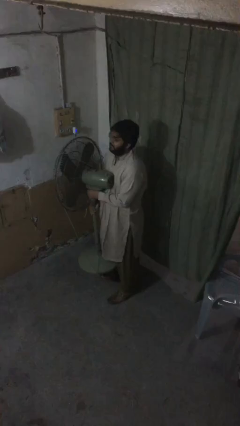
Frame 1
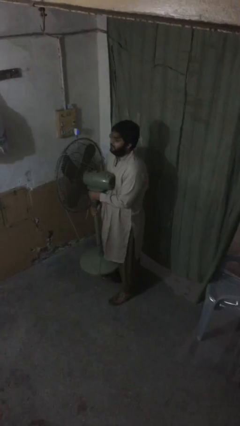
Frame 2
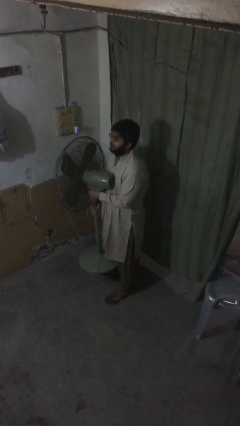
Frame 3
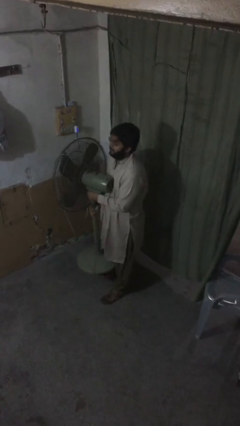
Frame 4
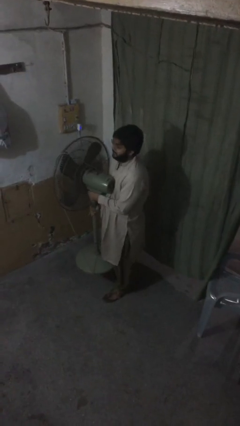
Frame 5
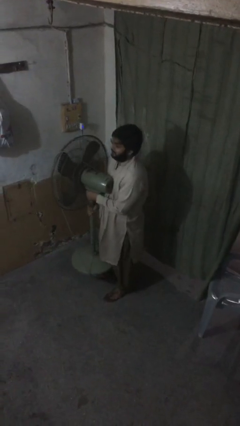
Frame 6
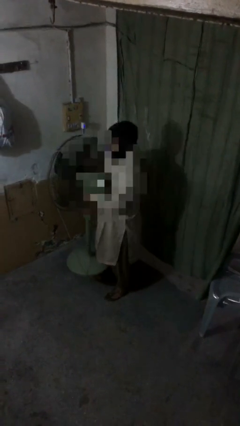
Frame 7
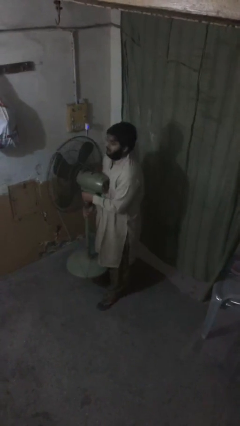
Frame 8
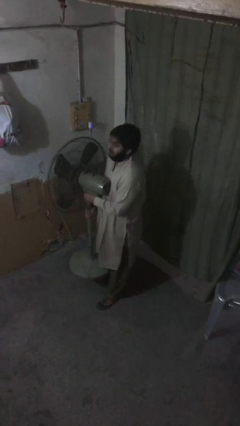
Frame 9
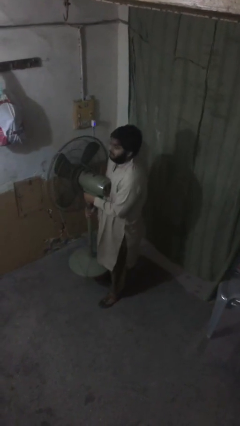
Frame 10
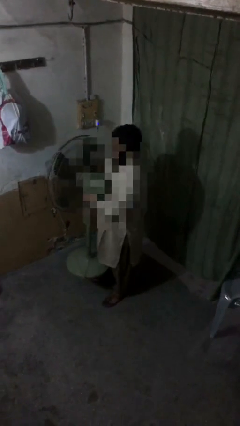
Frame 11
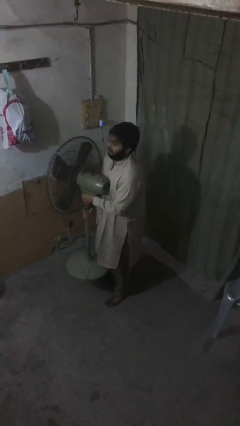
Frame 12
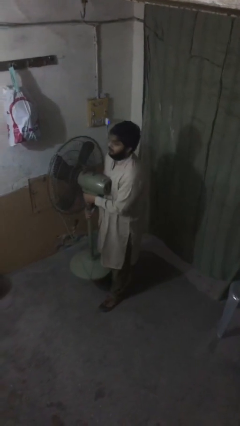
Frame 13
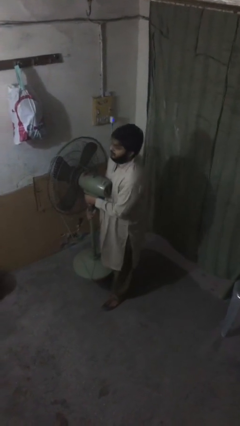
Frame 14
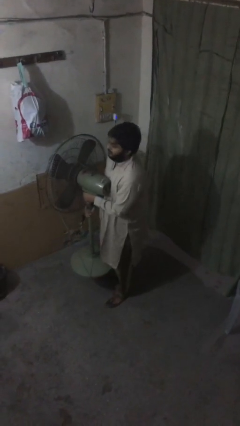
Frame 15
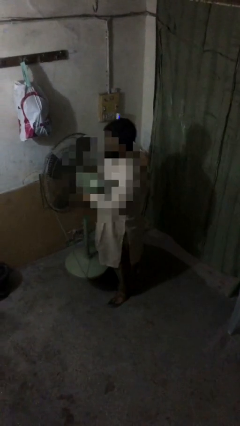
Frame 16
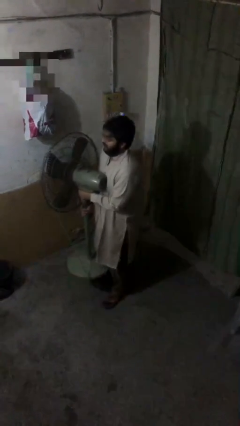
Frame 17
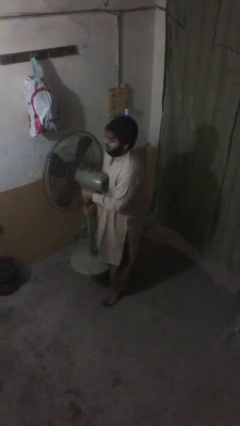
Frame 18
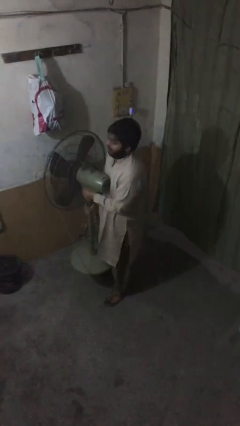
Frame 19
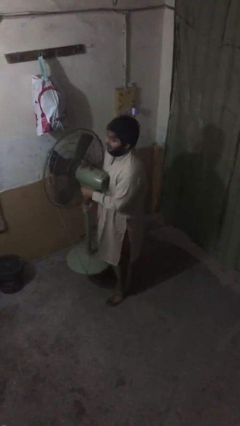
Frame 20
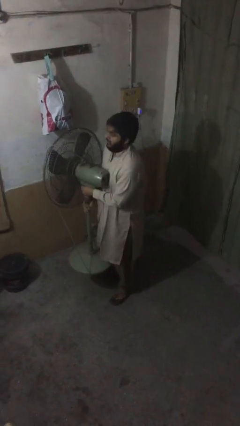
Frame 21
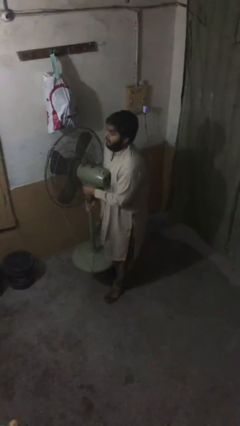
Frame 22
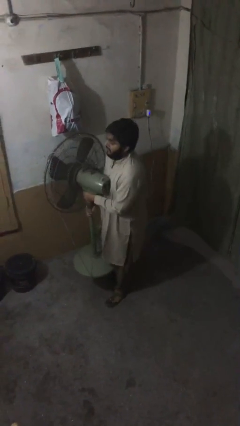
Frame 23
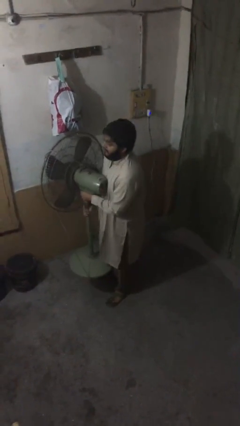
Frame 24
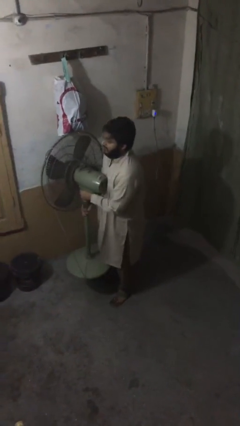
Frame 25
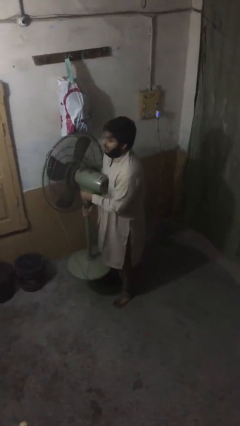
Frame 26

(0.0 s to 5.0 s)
person carries heavy object

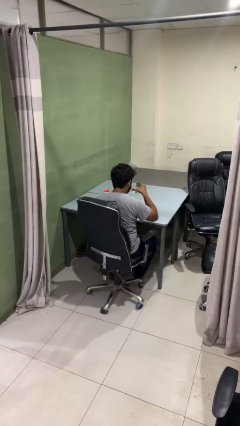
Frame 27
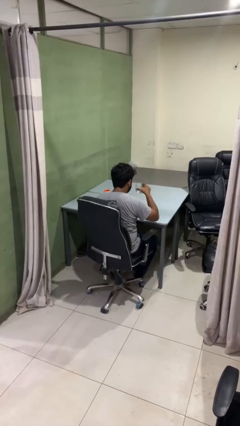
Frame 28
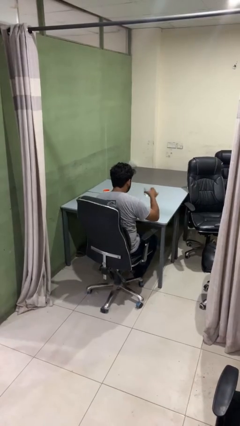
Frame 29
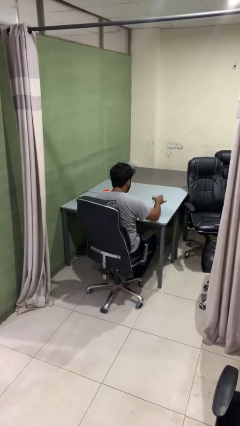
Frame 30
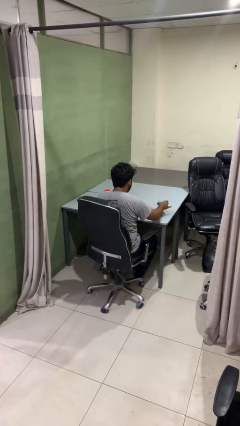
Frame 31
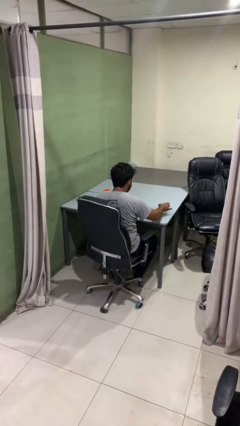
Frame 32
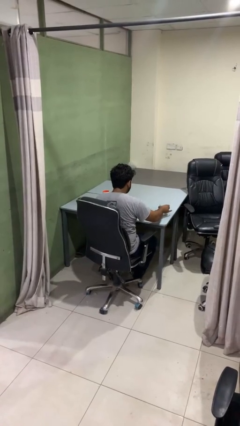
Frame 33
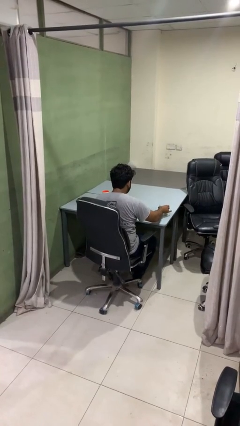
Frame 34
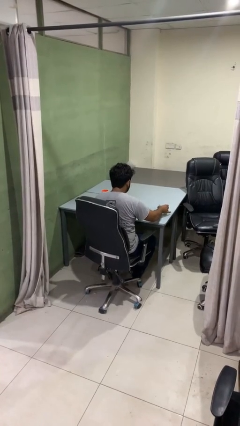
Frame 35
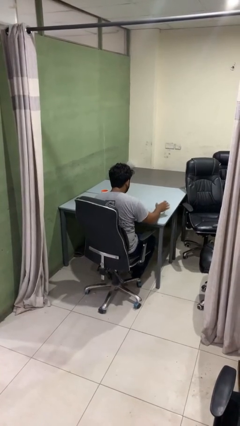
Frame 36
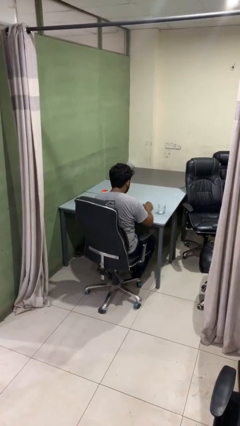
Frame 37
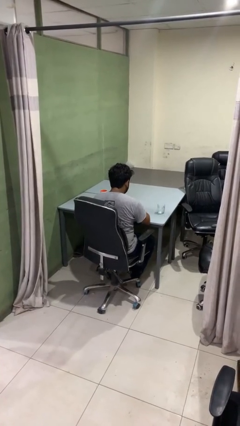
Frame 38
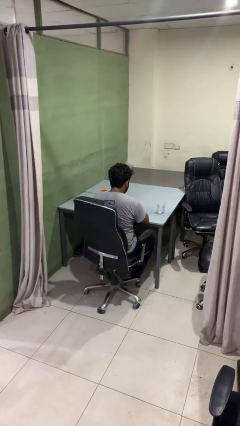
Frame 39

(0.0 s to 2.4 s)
person puts down object on table

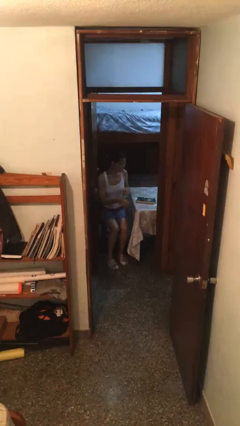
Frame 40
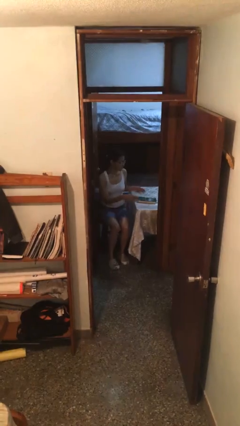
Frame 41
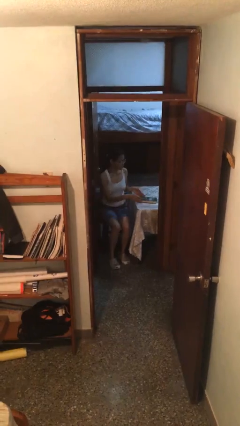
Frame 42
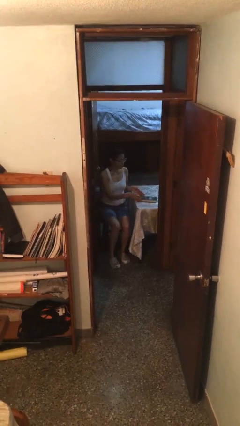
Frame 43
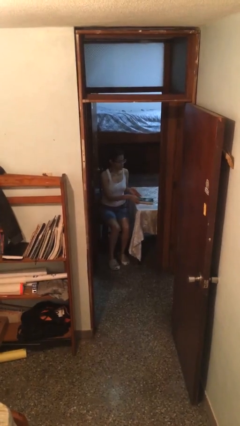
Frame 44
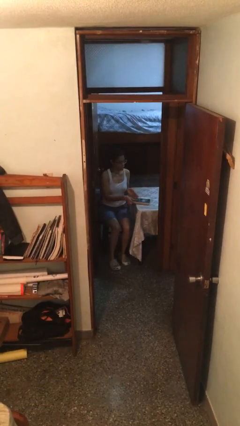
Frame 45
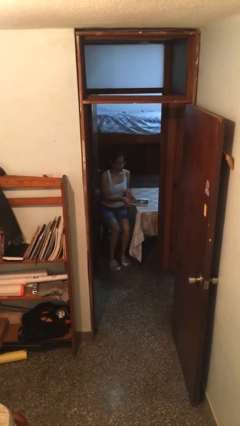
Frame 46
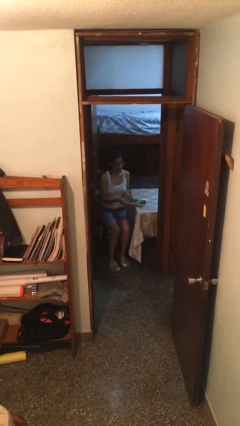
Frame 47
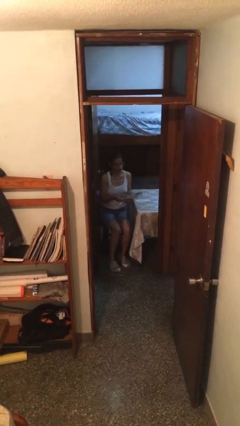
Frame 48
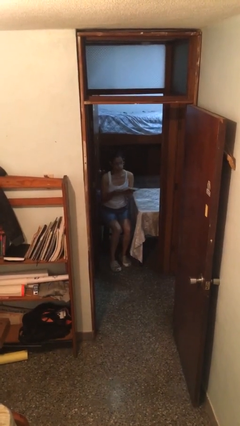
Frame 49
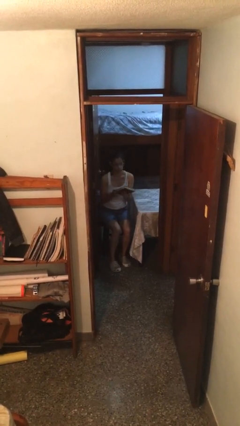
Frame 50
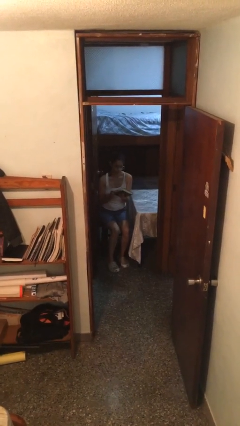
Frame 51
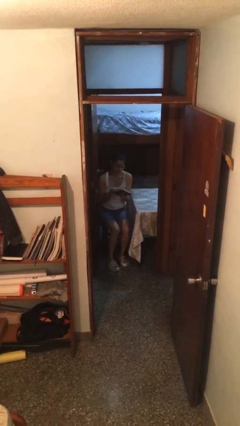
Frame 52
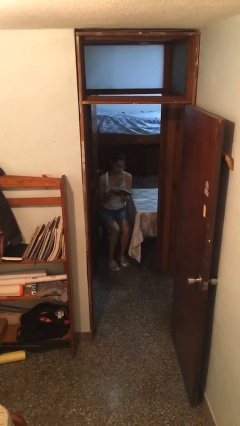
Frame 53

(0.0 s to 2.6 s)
person picks up object from table

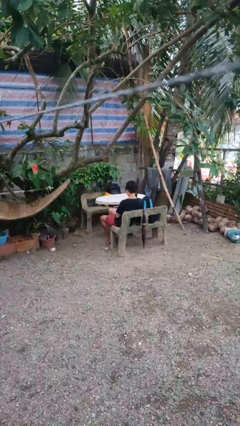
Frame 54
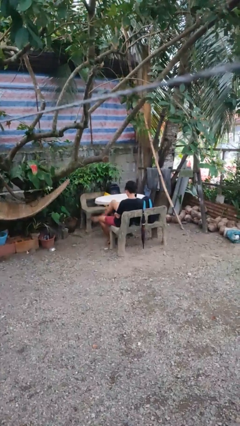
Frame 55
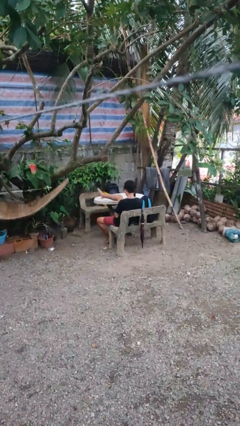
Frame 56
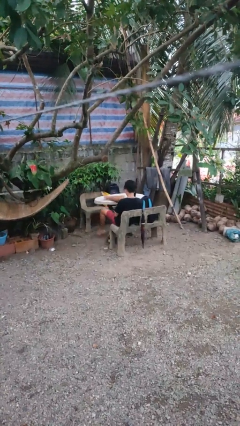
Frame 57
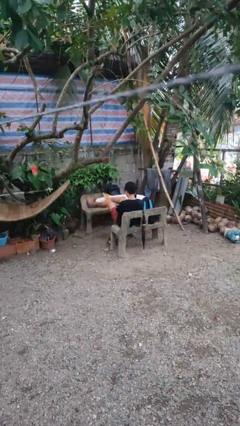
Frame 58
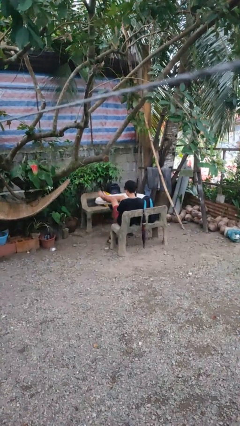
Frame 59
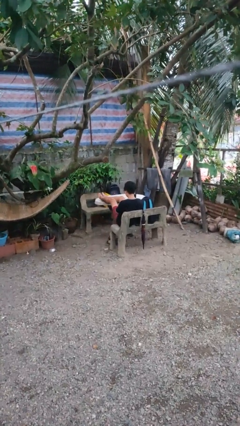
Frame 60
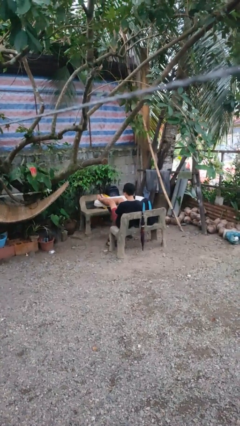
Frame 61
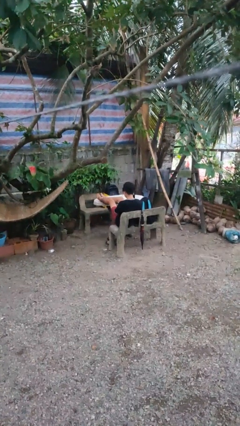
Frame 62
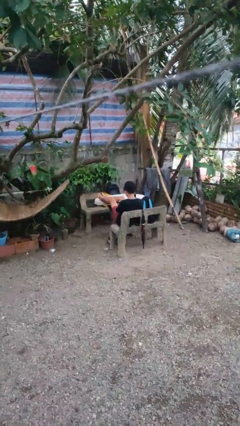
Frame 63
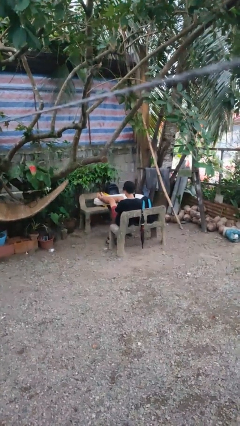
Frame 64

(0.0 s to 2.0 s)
person puts feet up

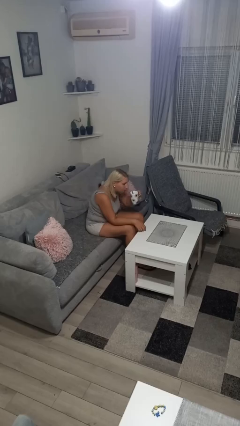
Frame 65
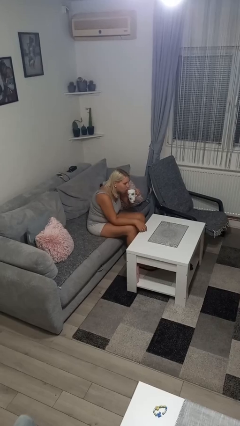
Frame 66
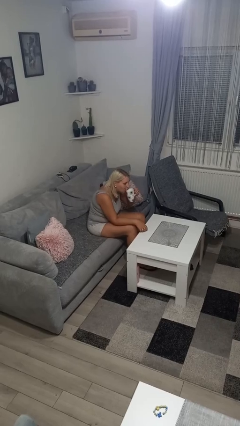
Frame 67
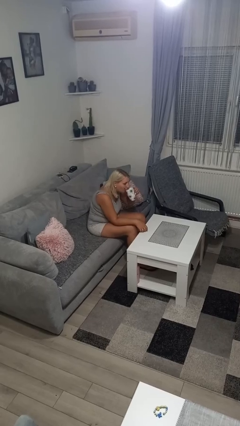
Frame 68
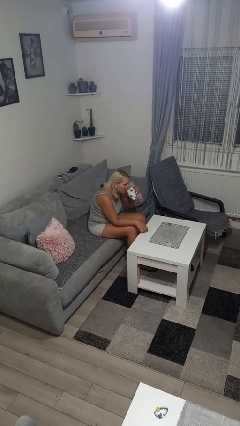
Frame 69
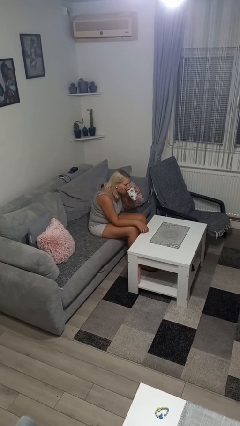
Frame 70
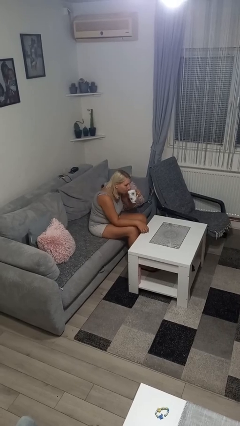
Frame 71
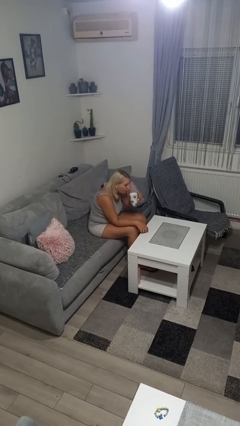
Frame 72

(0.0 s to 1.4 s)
person drinks from mug

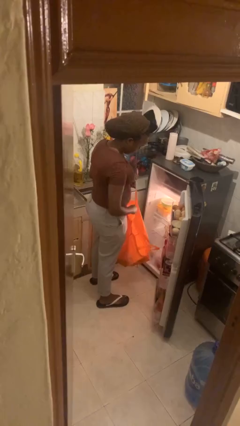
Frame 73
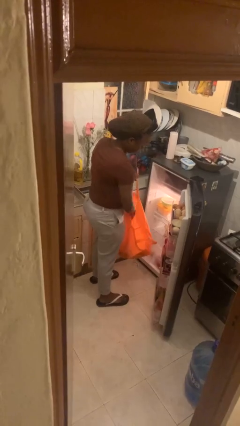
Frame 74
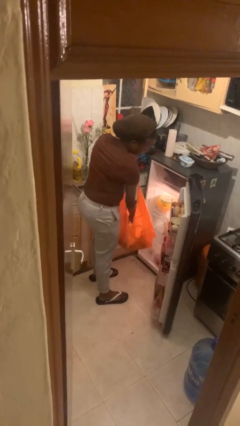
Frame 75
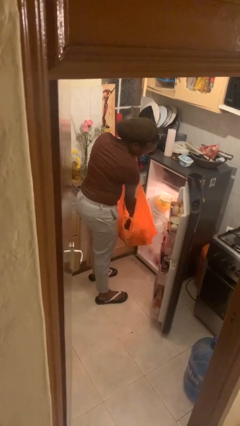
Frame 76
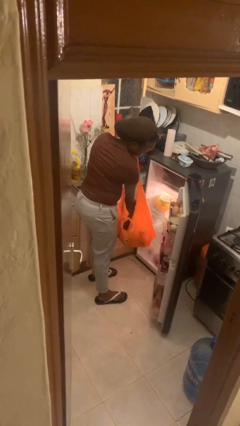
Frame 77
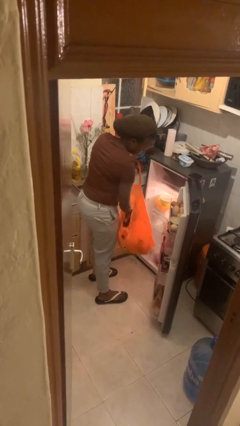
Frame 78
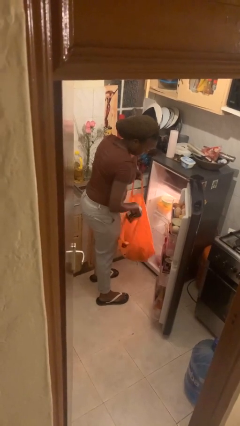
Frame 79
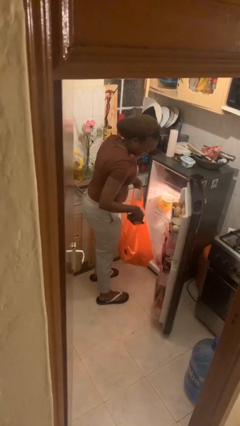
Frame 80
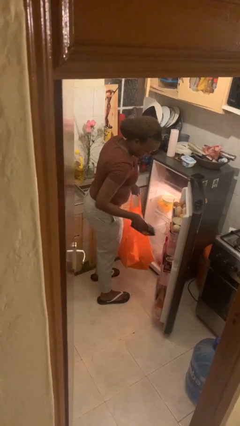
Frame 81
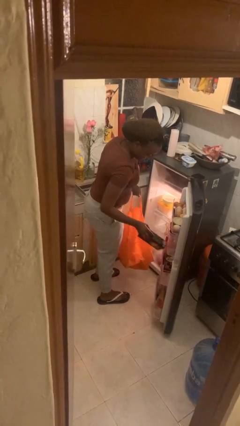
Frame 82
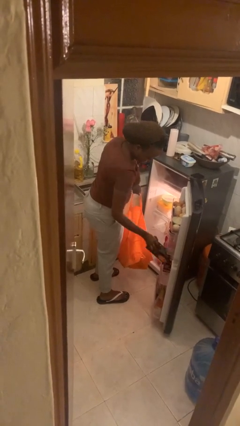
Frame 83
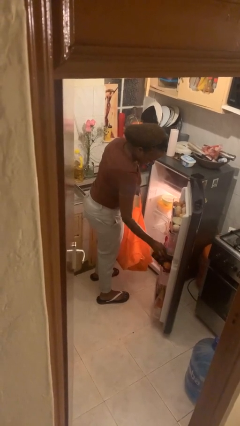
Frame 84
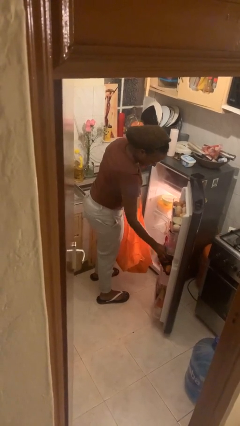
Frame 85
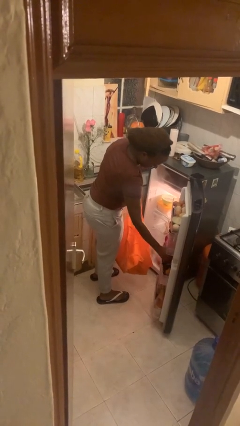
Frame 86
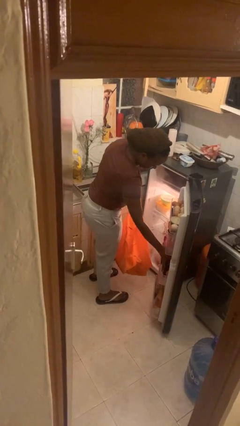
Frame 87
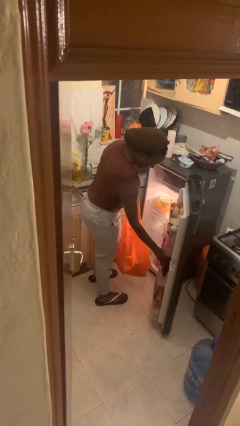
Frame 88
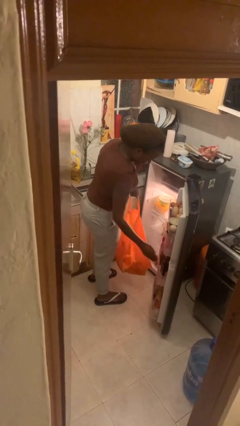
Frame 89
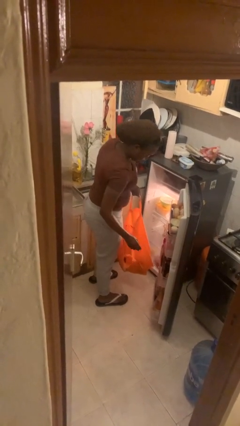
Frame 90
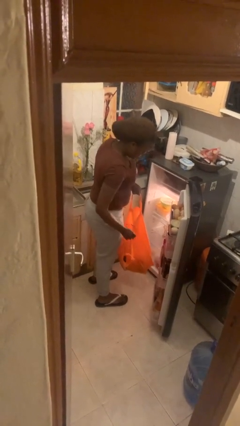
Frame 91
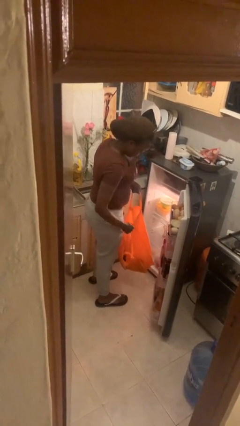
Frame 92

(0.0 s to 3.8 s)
person loads groceries into refrigerator

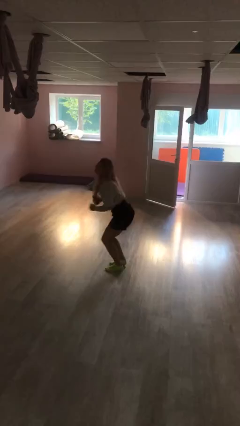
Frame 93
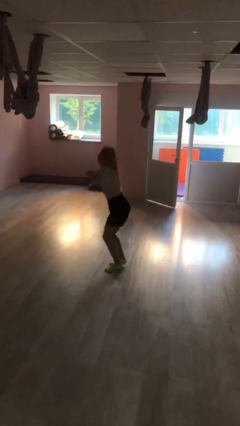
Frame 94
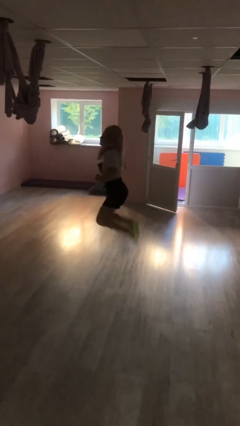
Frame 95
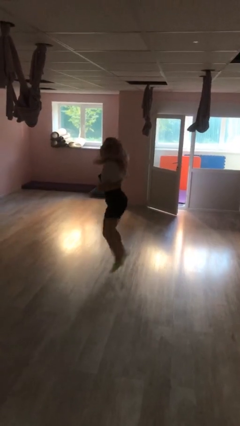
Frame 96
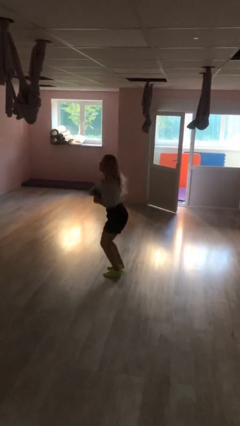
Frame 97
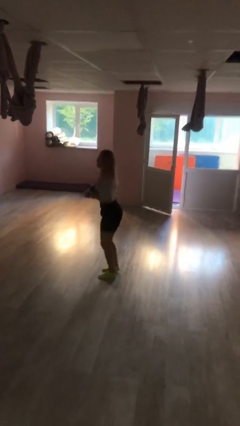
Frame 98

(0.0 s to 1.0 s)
person jumps
